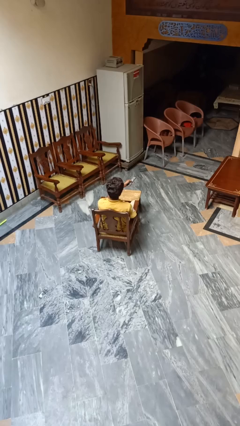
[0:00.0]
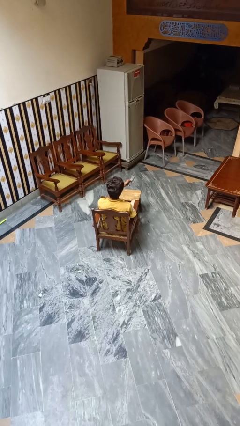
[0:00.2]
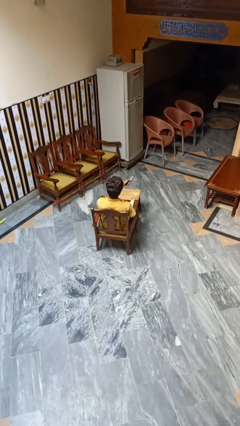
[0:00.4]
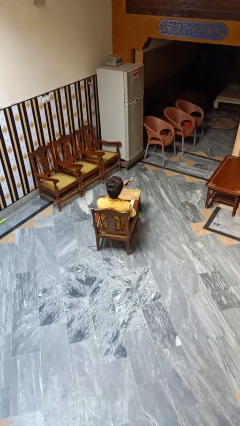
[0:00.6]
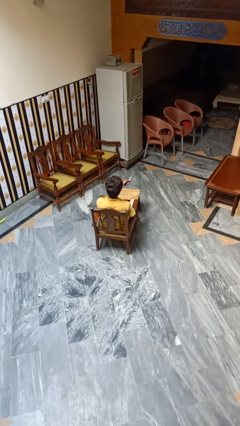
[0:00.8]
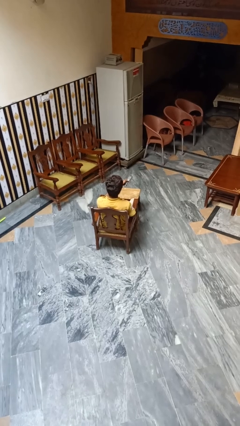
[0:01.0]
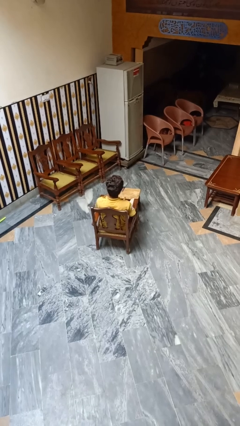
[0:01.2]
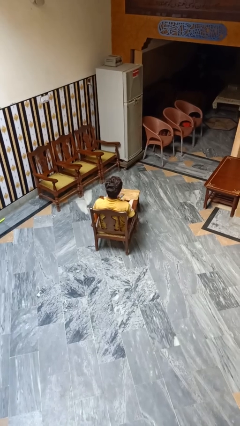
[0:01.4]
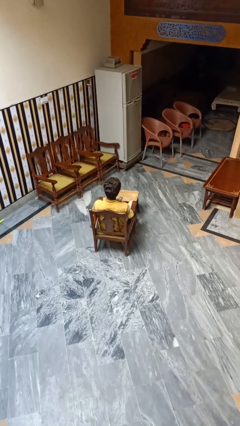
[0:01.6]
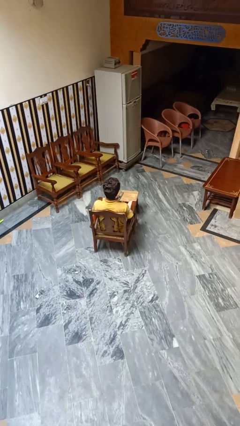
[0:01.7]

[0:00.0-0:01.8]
person uses television remote

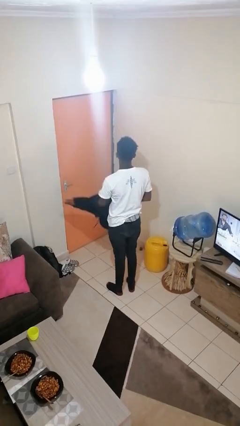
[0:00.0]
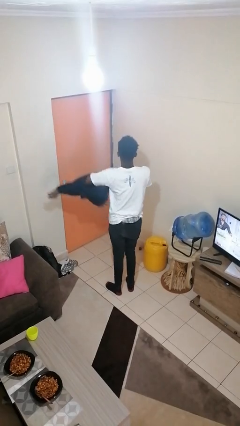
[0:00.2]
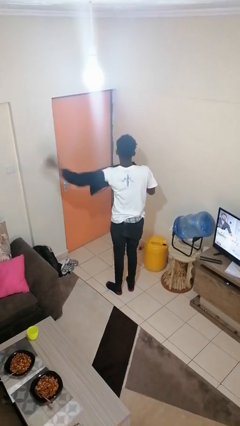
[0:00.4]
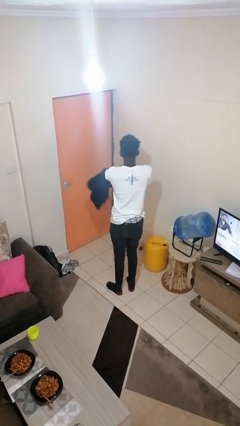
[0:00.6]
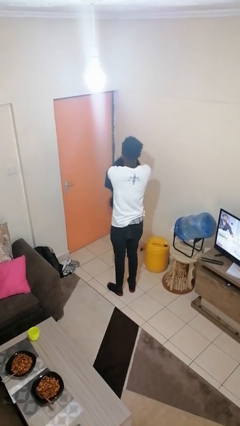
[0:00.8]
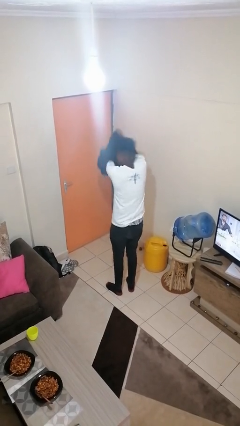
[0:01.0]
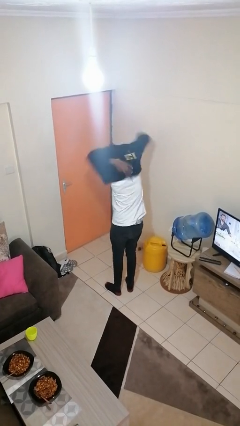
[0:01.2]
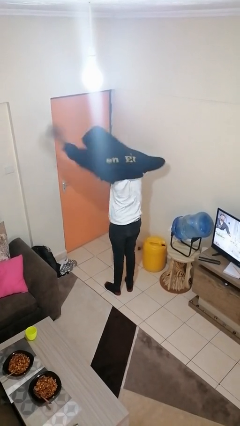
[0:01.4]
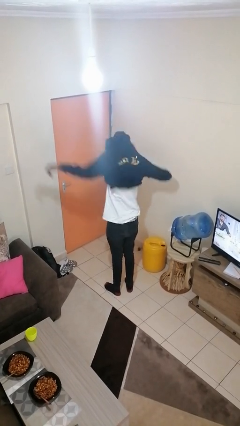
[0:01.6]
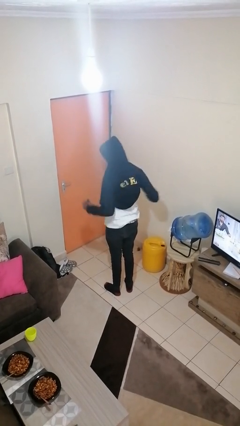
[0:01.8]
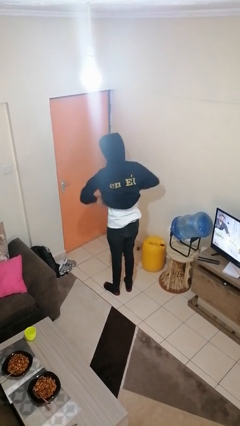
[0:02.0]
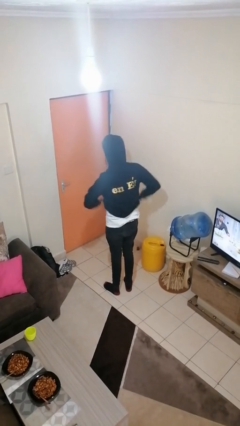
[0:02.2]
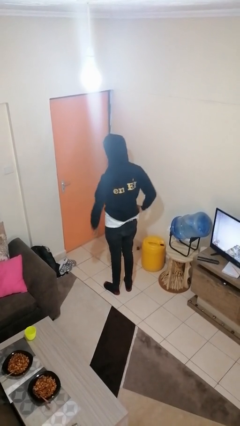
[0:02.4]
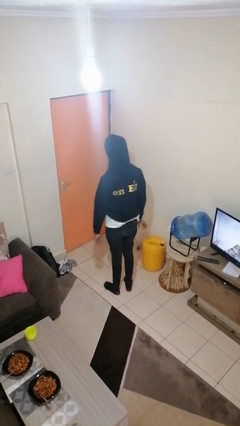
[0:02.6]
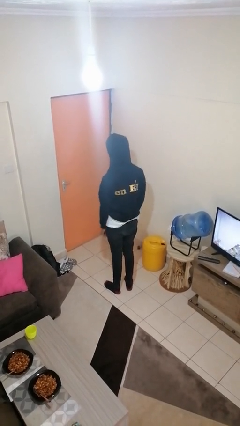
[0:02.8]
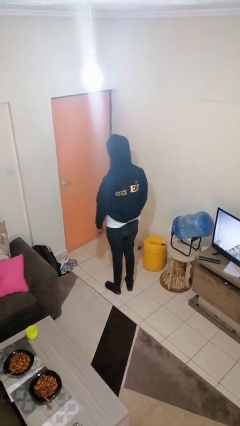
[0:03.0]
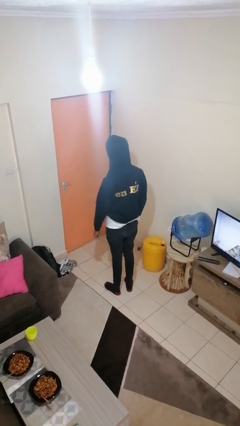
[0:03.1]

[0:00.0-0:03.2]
person puts on hoodie

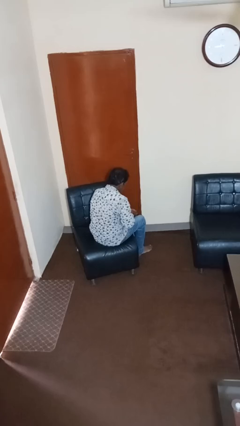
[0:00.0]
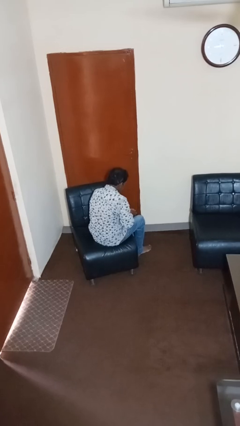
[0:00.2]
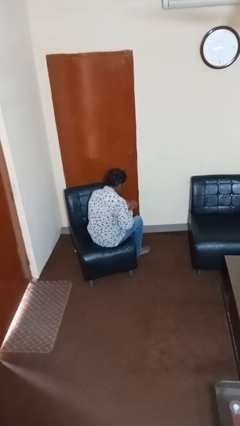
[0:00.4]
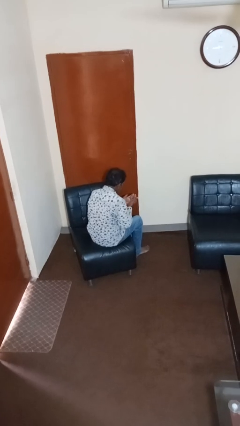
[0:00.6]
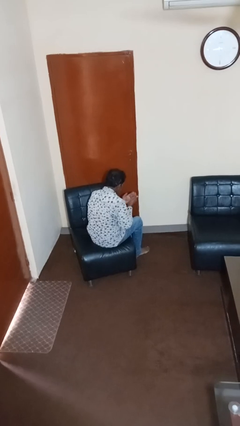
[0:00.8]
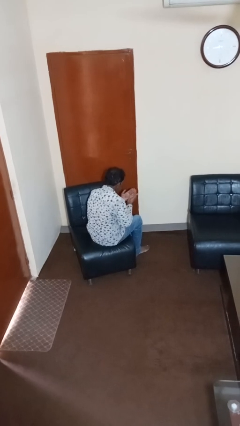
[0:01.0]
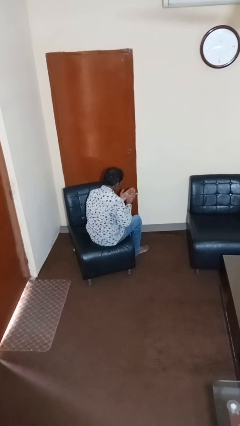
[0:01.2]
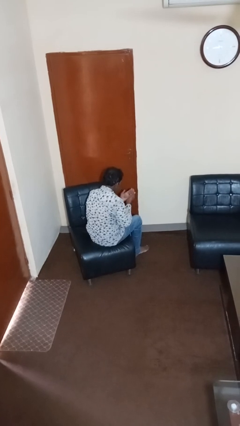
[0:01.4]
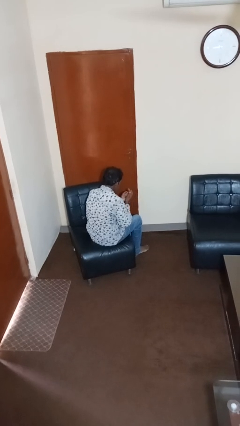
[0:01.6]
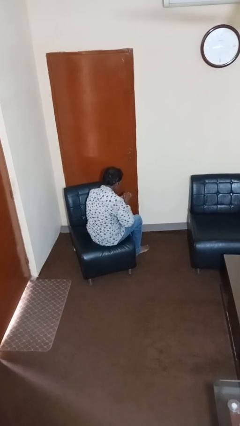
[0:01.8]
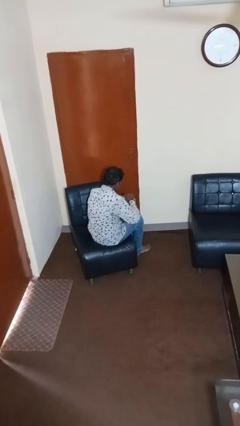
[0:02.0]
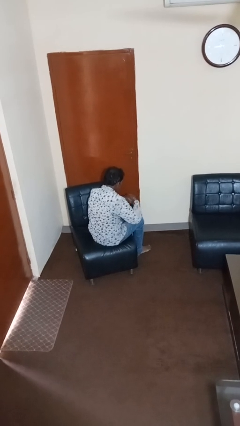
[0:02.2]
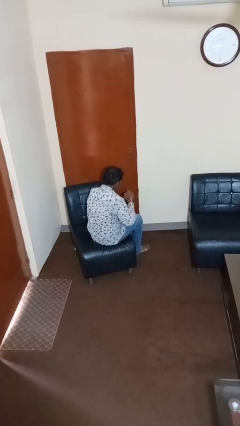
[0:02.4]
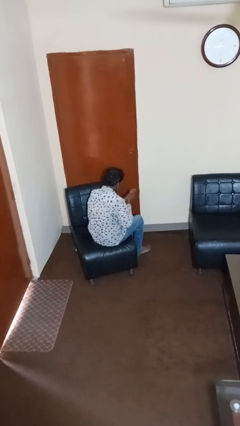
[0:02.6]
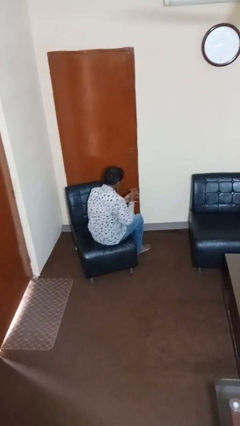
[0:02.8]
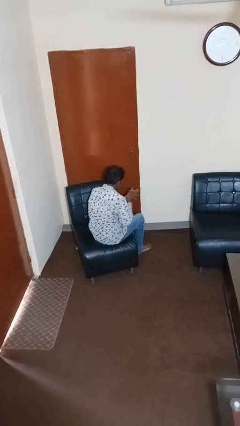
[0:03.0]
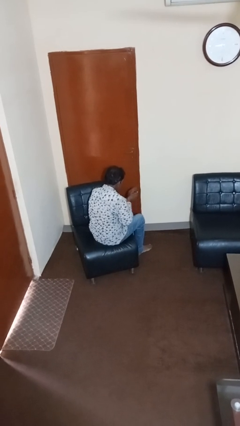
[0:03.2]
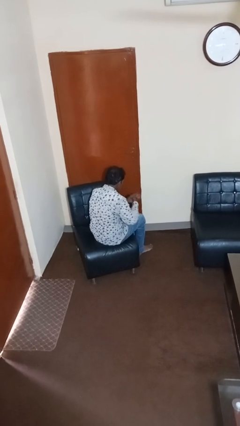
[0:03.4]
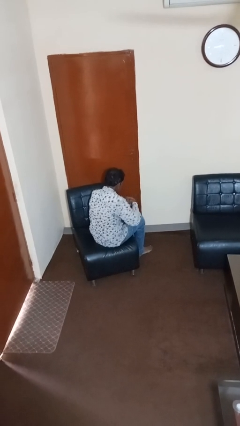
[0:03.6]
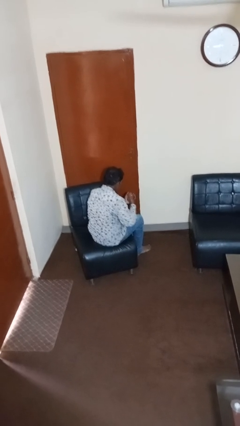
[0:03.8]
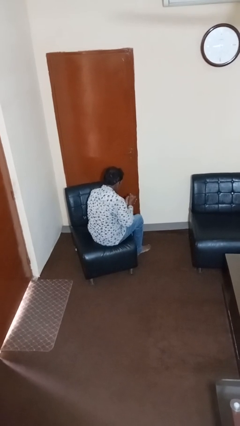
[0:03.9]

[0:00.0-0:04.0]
person looks at hands in lap

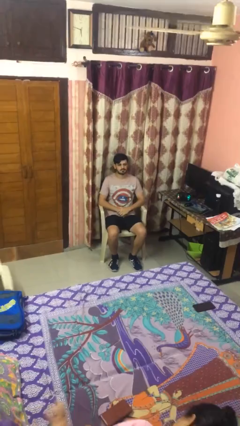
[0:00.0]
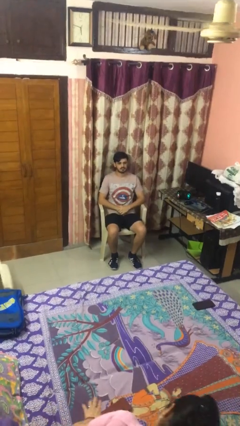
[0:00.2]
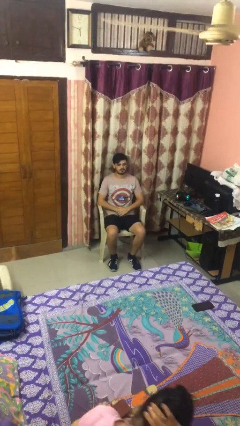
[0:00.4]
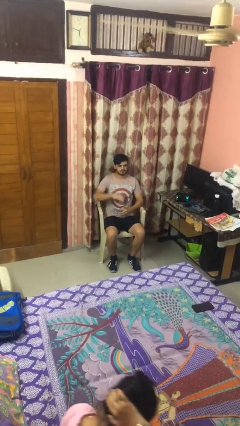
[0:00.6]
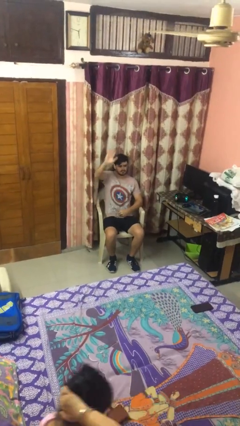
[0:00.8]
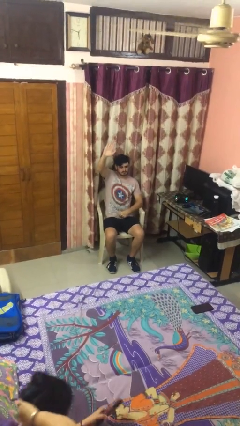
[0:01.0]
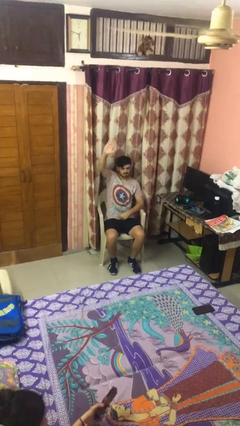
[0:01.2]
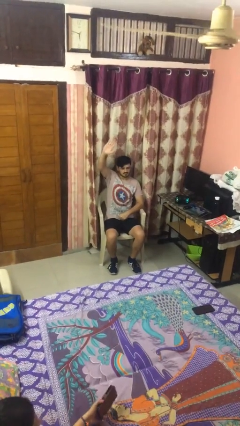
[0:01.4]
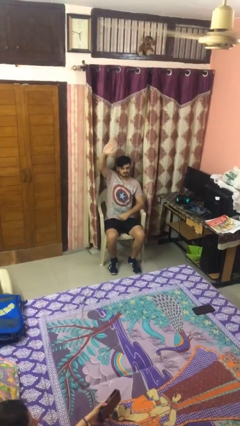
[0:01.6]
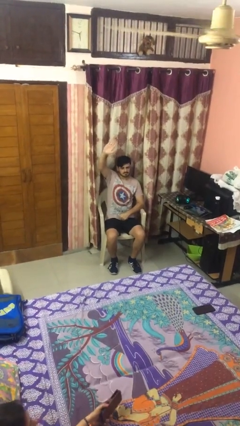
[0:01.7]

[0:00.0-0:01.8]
person gestures raise hand

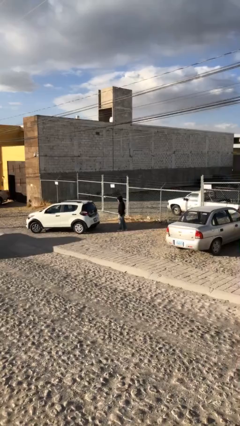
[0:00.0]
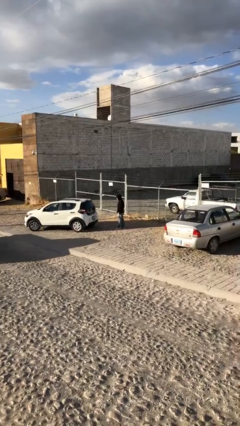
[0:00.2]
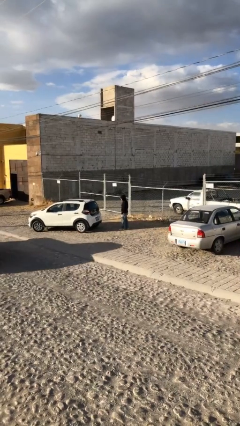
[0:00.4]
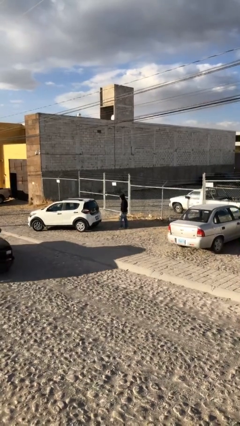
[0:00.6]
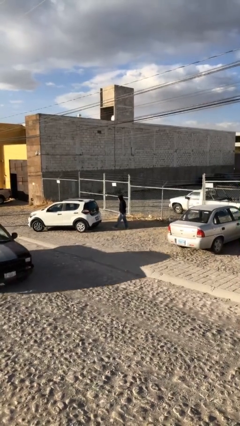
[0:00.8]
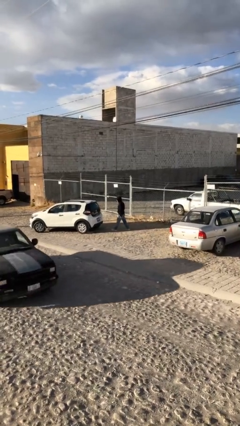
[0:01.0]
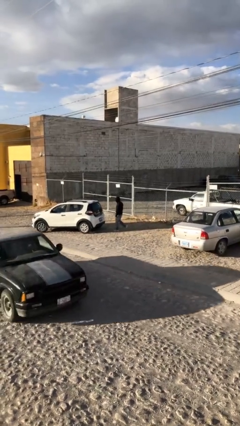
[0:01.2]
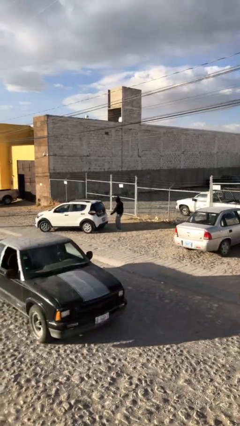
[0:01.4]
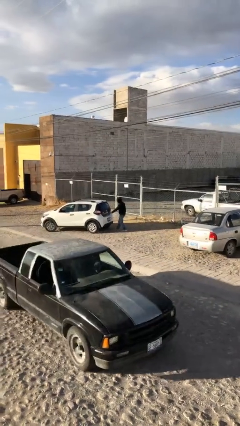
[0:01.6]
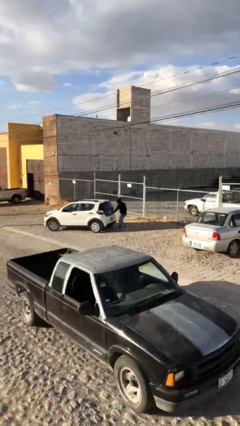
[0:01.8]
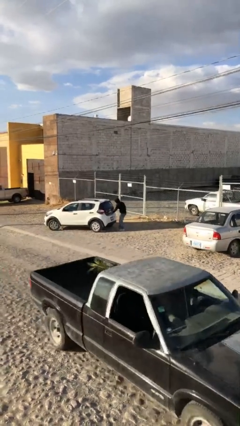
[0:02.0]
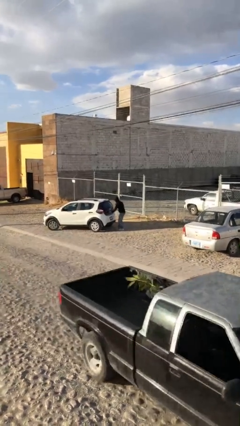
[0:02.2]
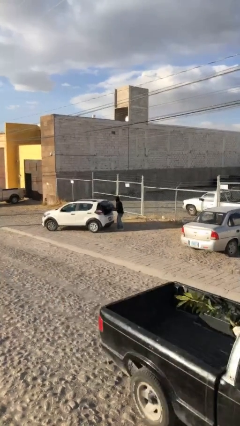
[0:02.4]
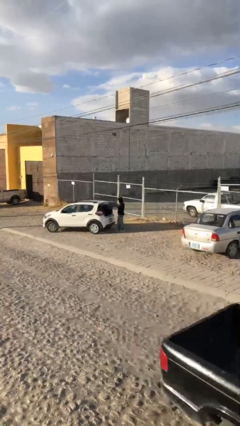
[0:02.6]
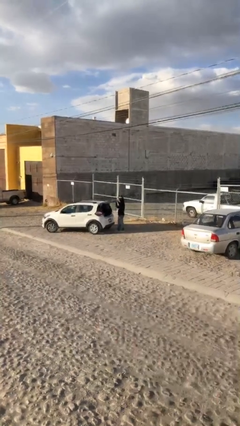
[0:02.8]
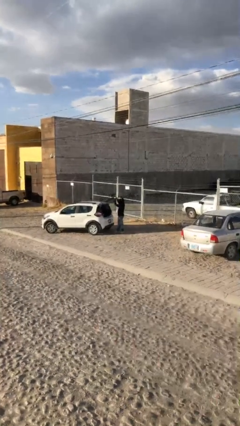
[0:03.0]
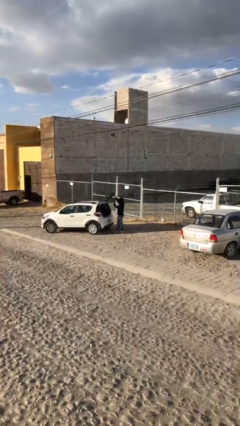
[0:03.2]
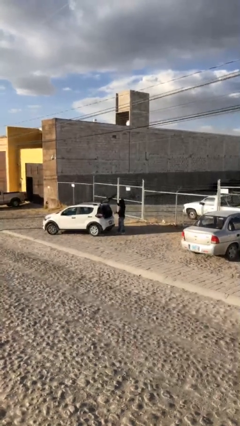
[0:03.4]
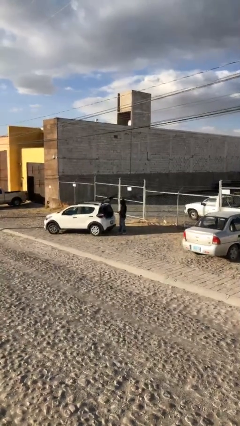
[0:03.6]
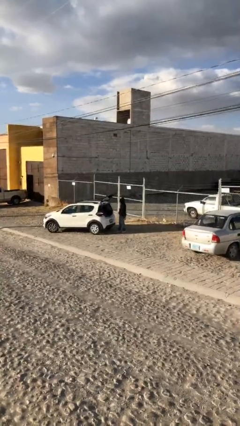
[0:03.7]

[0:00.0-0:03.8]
person opens car trunk

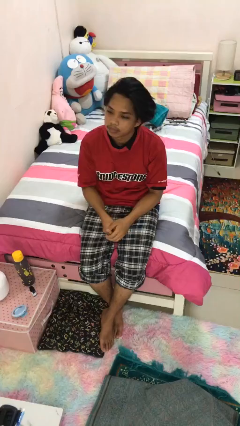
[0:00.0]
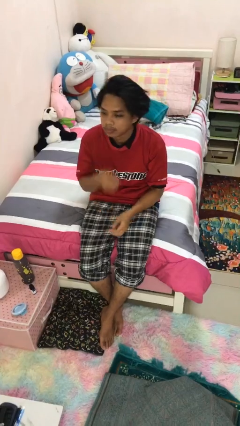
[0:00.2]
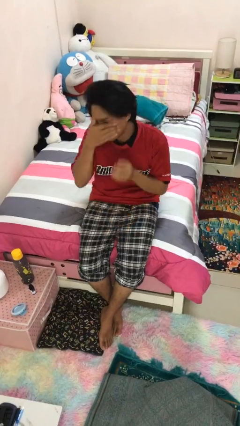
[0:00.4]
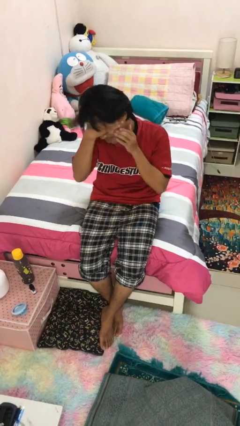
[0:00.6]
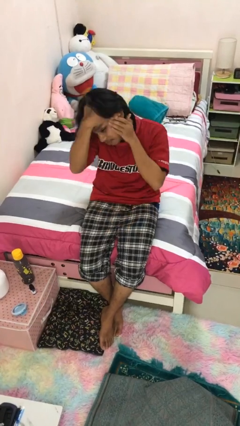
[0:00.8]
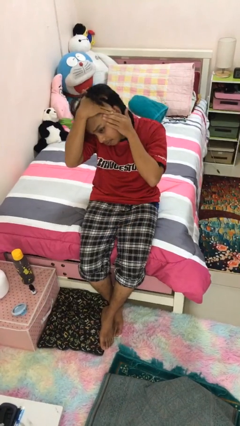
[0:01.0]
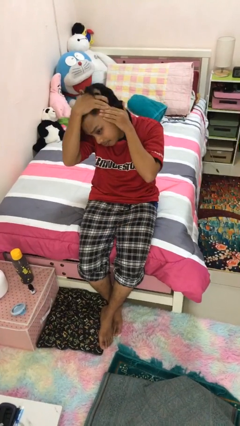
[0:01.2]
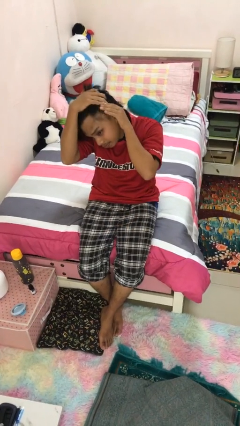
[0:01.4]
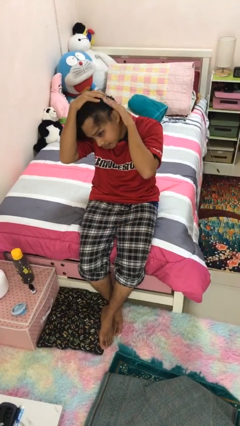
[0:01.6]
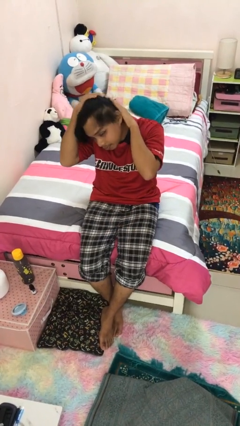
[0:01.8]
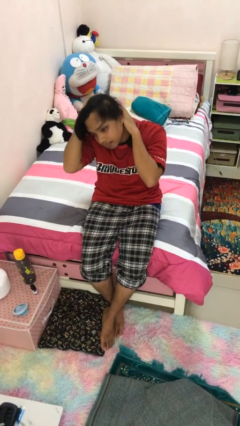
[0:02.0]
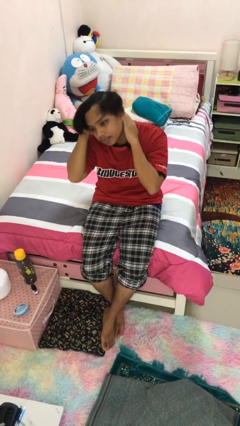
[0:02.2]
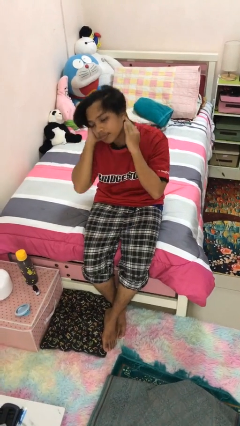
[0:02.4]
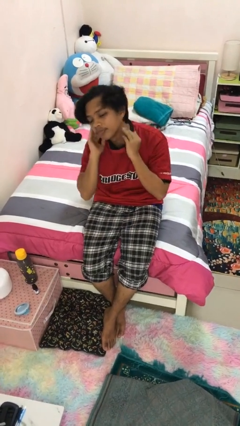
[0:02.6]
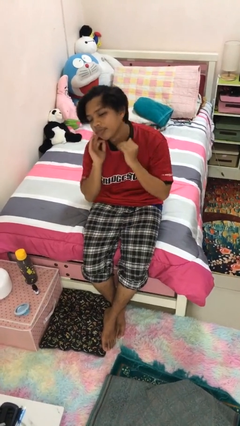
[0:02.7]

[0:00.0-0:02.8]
person strokes hair
